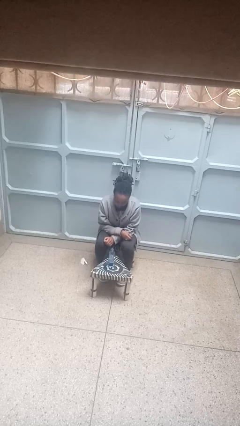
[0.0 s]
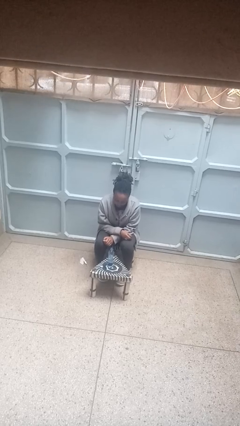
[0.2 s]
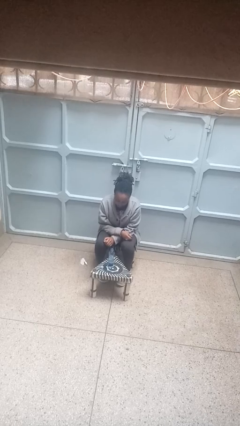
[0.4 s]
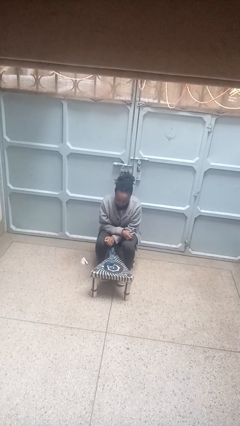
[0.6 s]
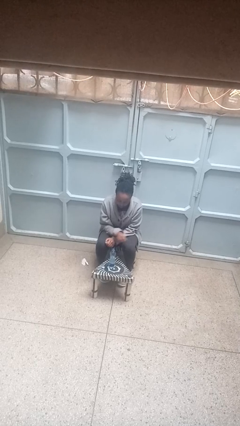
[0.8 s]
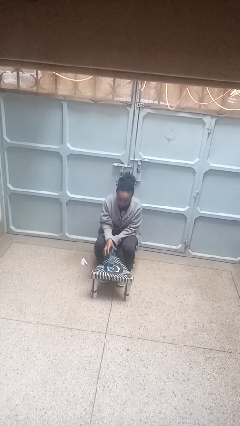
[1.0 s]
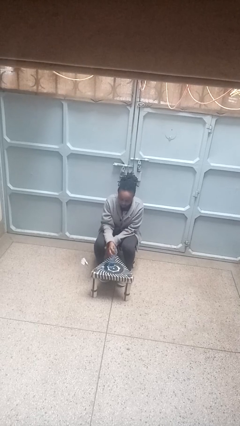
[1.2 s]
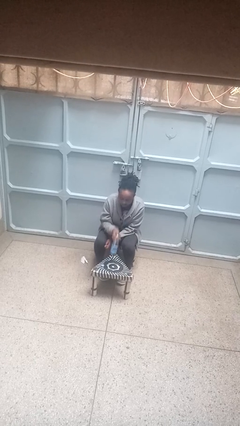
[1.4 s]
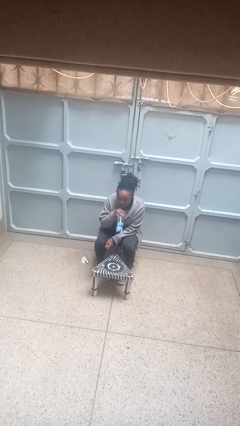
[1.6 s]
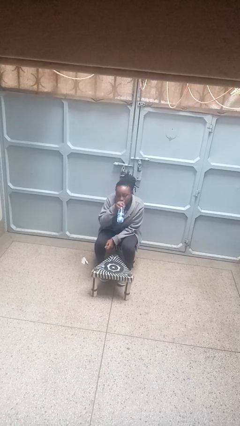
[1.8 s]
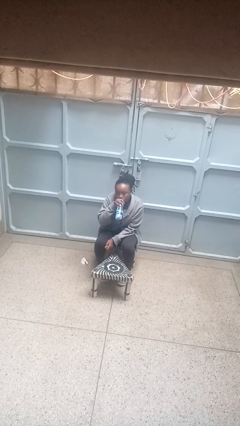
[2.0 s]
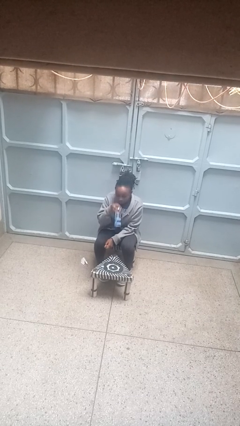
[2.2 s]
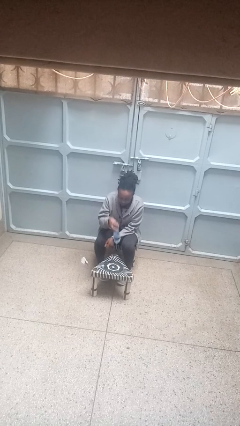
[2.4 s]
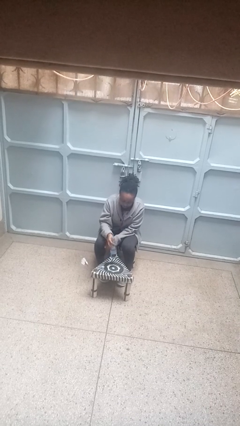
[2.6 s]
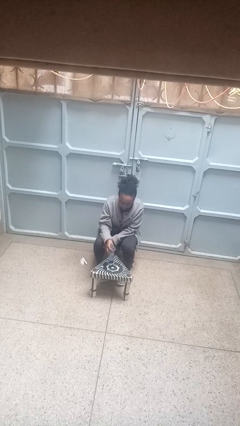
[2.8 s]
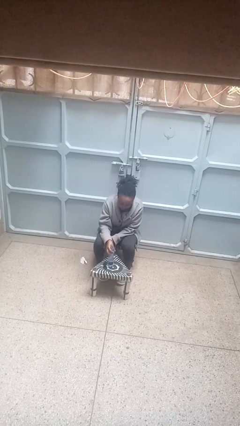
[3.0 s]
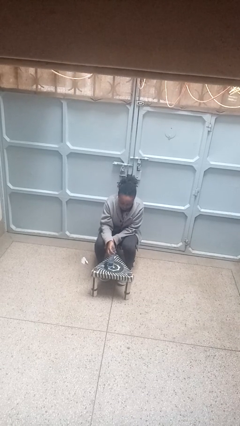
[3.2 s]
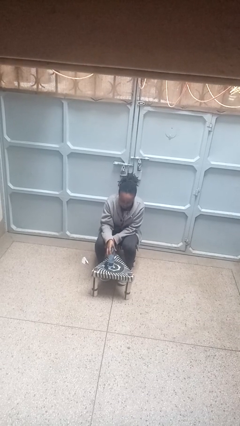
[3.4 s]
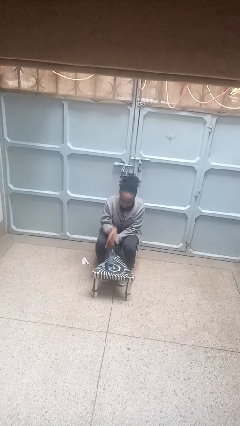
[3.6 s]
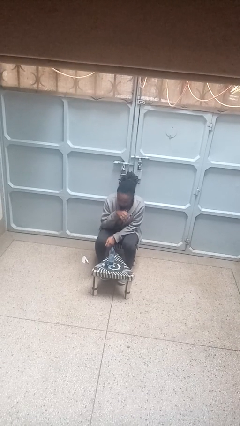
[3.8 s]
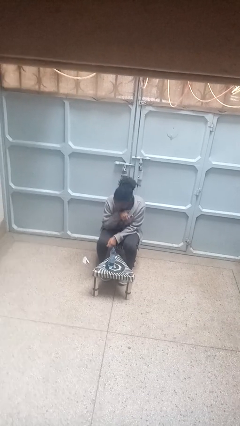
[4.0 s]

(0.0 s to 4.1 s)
person drinks from cup

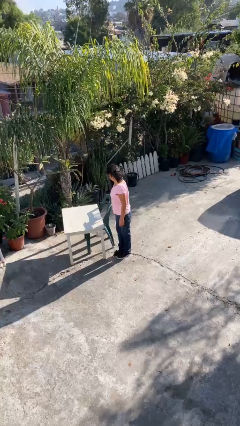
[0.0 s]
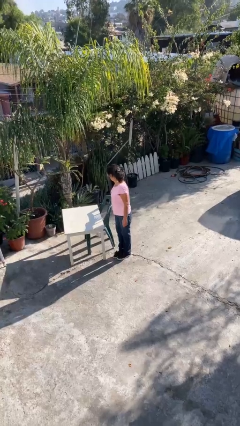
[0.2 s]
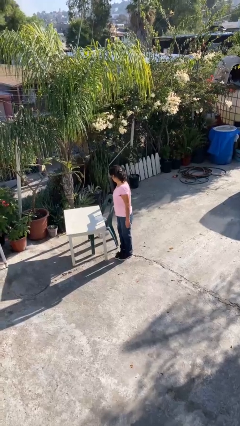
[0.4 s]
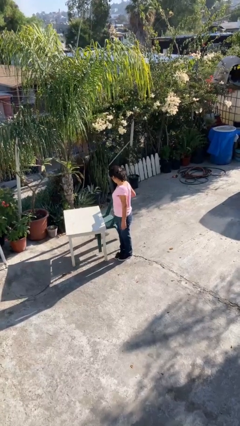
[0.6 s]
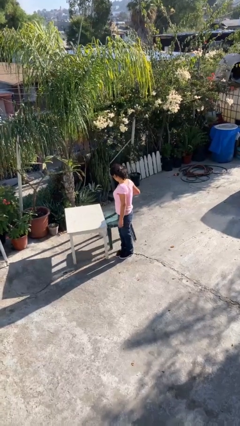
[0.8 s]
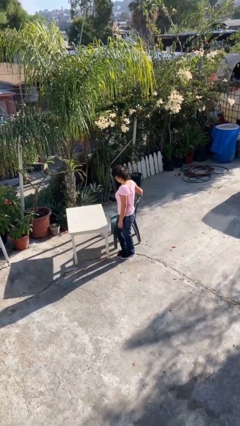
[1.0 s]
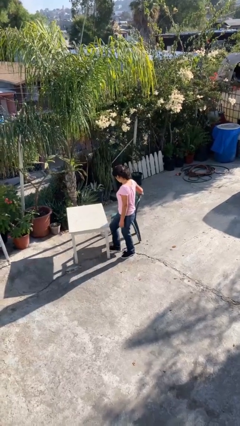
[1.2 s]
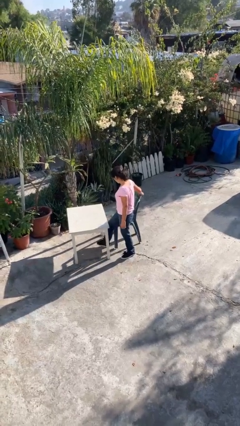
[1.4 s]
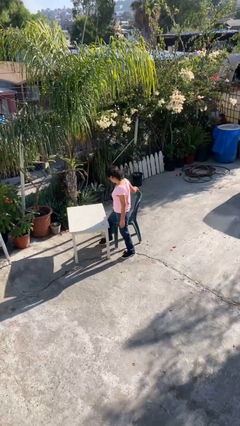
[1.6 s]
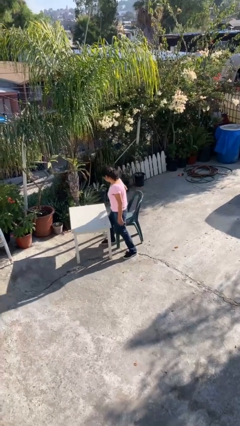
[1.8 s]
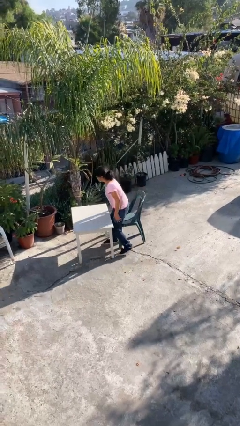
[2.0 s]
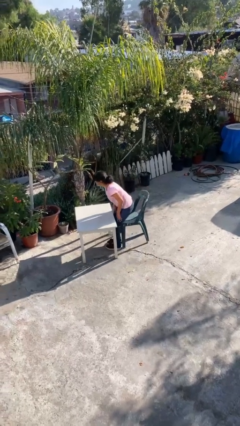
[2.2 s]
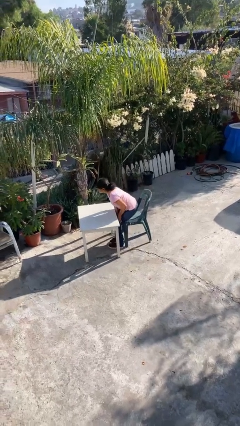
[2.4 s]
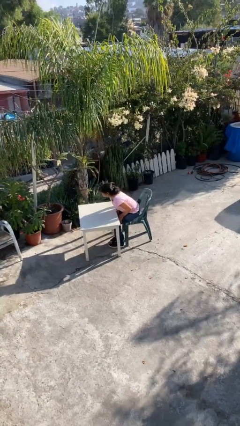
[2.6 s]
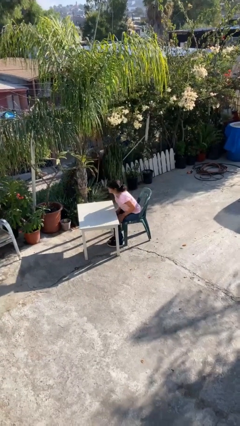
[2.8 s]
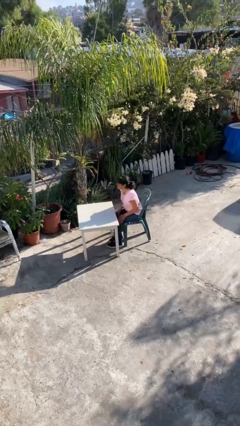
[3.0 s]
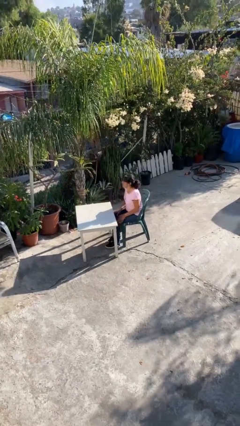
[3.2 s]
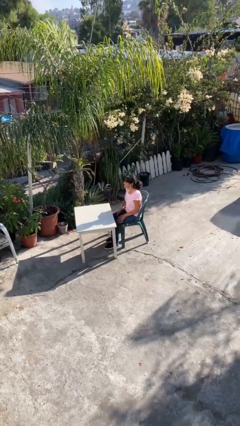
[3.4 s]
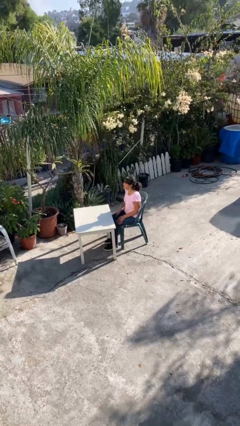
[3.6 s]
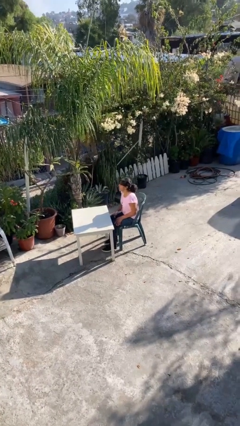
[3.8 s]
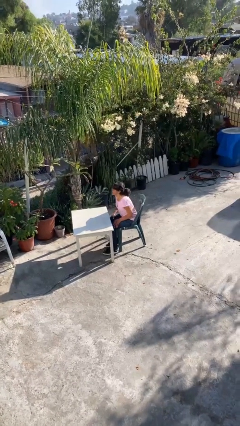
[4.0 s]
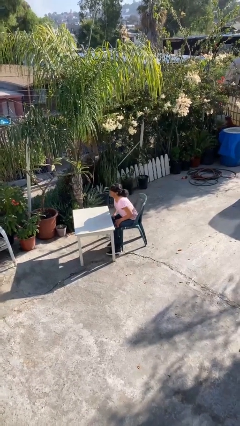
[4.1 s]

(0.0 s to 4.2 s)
person sits down

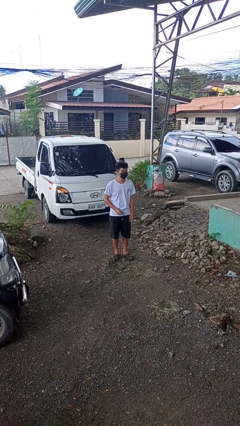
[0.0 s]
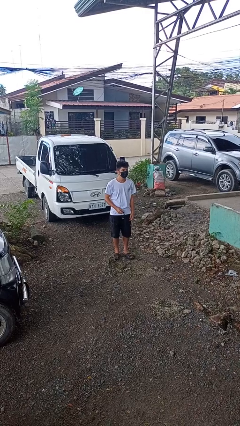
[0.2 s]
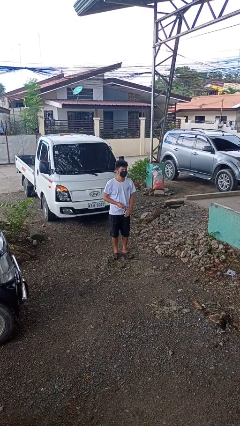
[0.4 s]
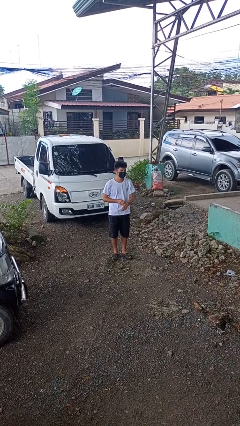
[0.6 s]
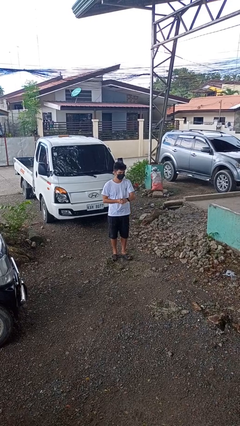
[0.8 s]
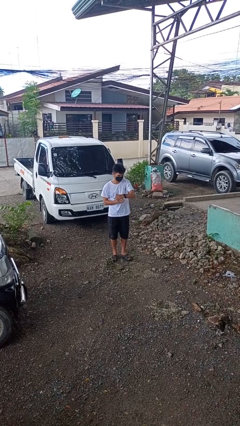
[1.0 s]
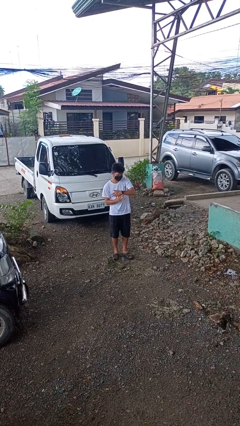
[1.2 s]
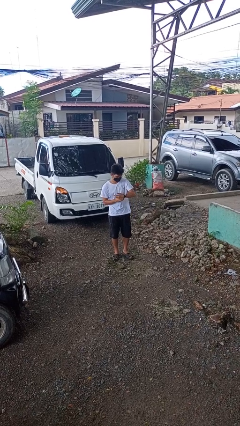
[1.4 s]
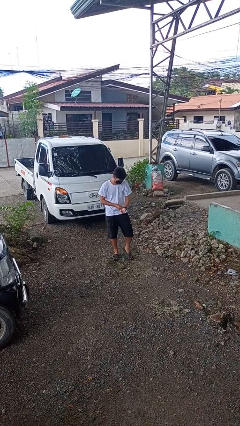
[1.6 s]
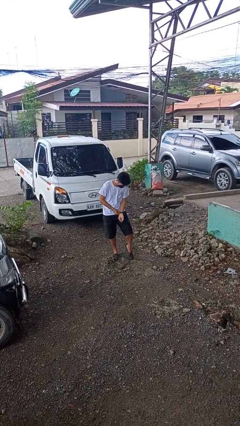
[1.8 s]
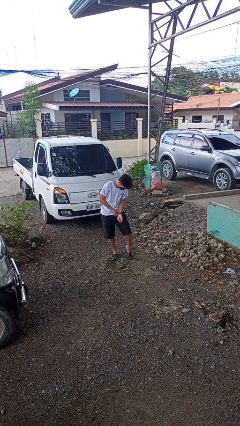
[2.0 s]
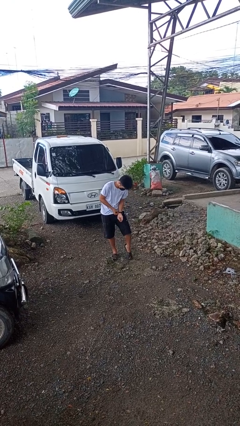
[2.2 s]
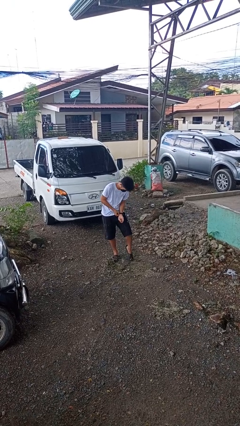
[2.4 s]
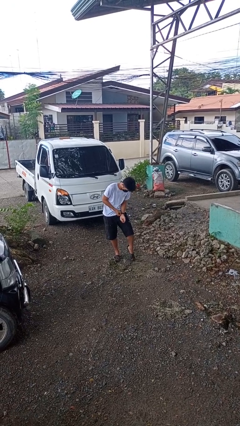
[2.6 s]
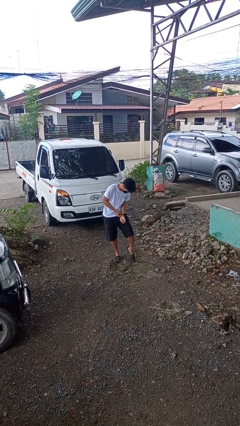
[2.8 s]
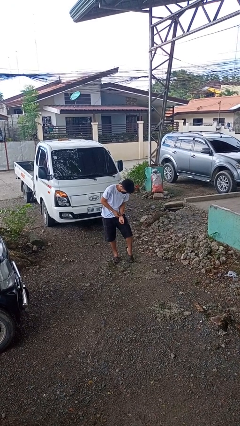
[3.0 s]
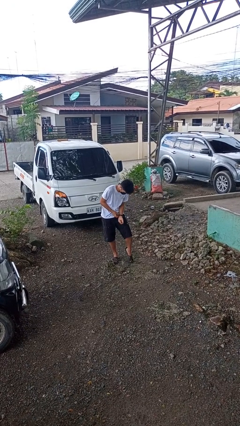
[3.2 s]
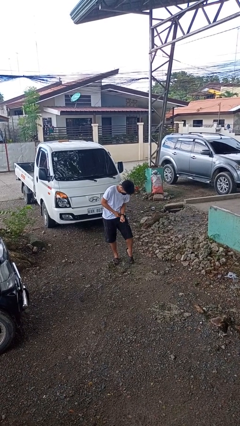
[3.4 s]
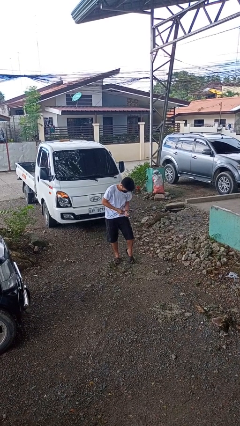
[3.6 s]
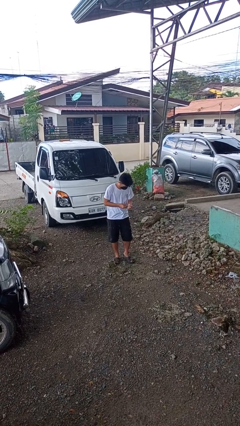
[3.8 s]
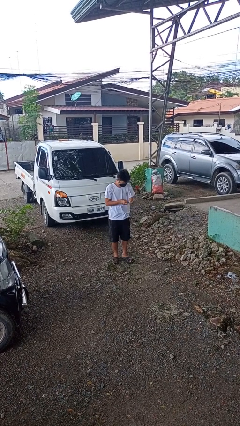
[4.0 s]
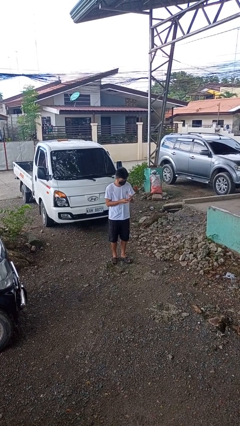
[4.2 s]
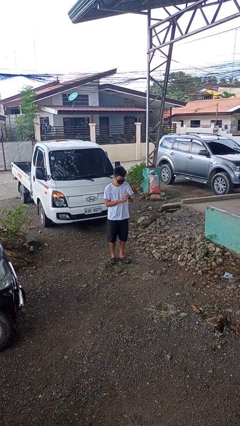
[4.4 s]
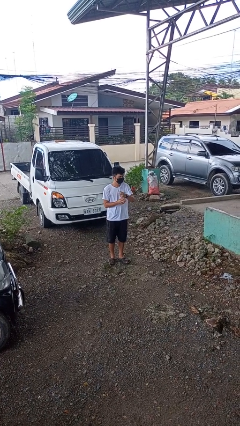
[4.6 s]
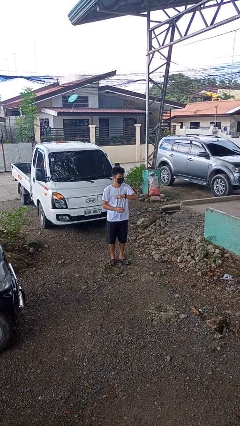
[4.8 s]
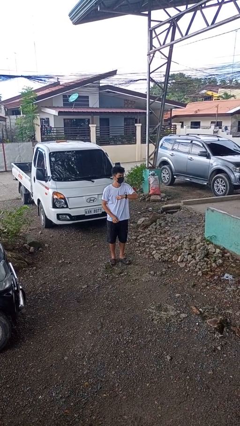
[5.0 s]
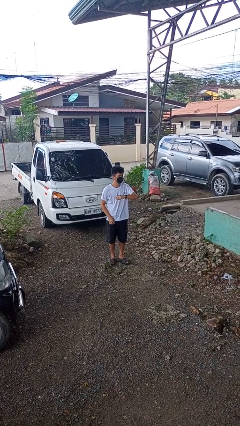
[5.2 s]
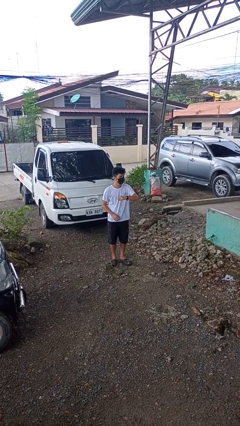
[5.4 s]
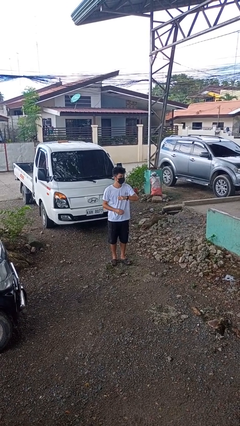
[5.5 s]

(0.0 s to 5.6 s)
person puts on wristwatch

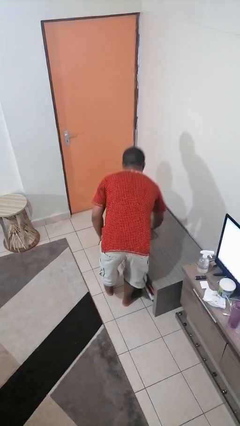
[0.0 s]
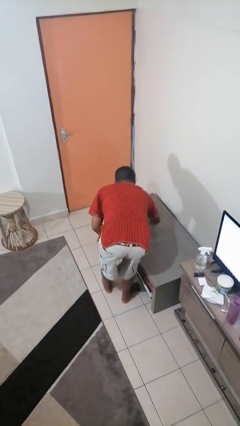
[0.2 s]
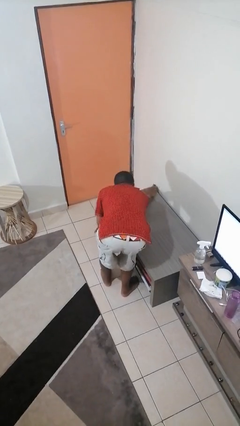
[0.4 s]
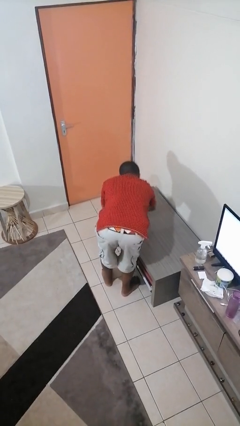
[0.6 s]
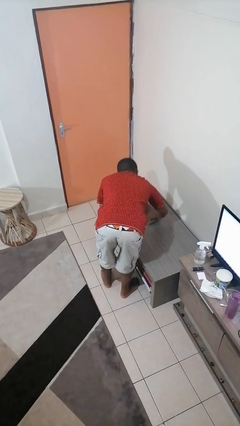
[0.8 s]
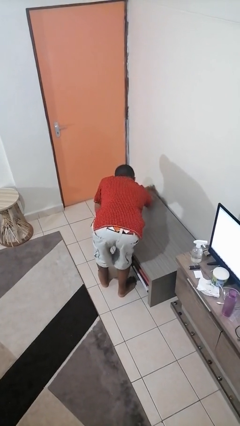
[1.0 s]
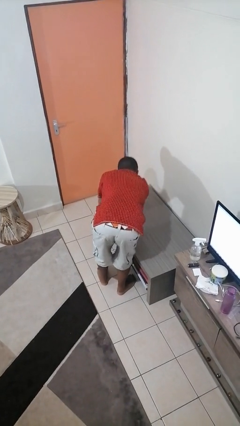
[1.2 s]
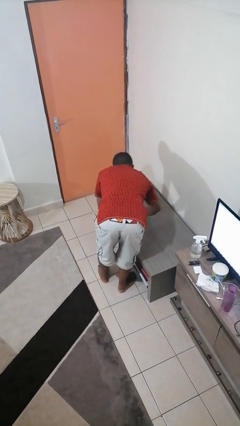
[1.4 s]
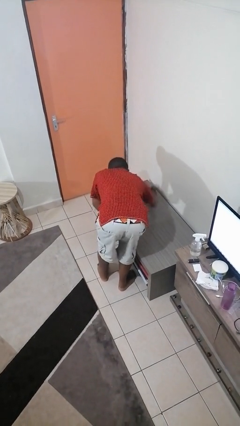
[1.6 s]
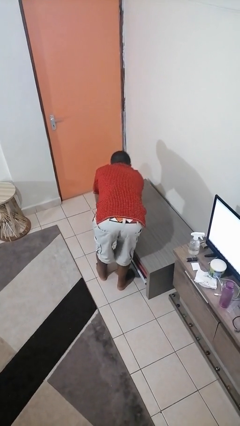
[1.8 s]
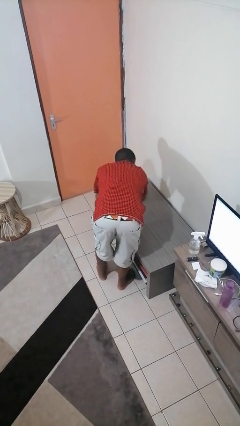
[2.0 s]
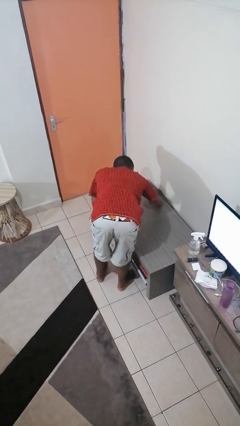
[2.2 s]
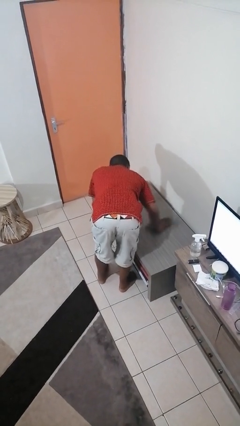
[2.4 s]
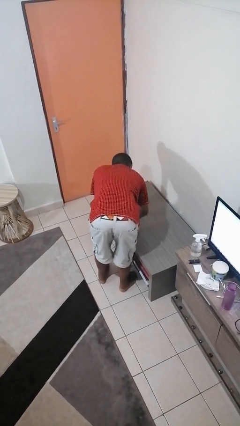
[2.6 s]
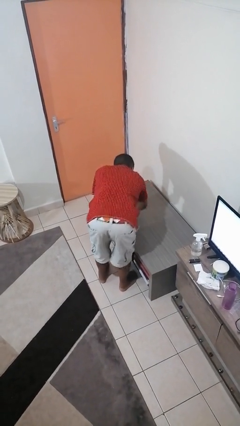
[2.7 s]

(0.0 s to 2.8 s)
person cleans table with rag

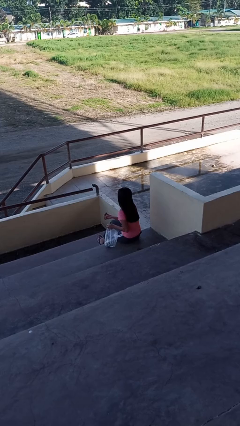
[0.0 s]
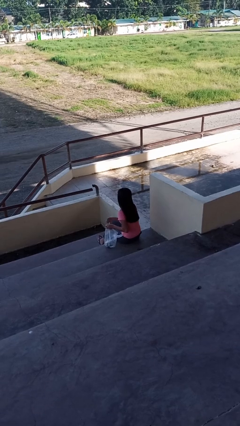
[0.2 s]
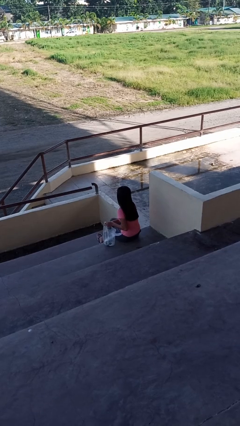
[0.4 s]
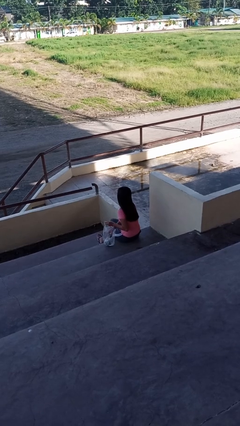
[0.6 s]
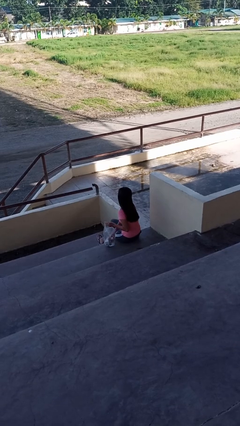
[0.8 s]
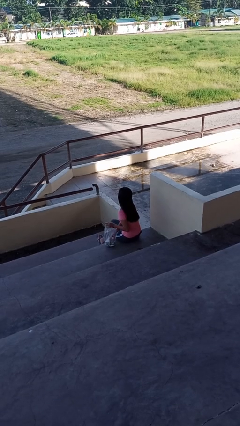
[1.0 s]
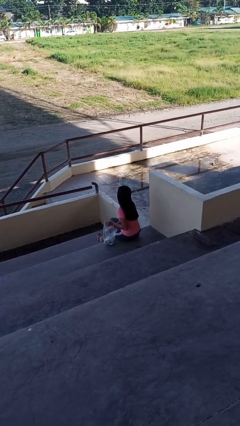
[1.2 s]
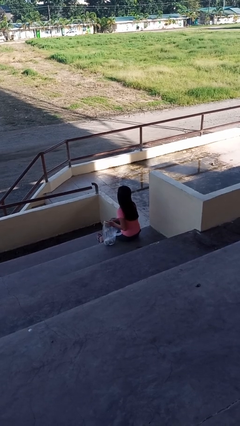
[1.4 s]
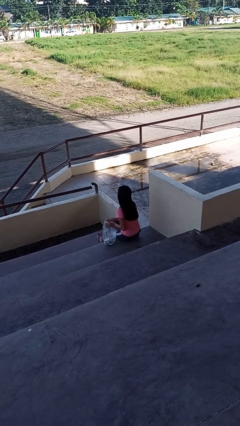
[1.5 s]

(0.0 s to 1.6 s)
person puts object into bag
